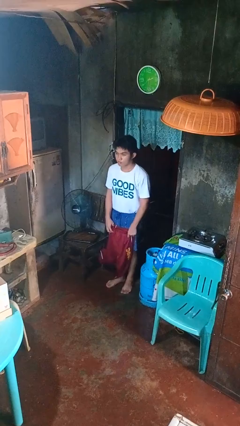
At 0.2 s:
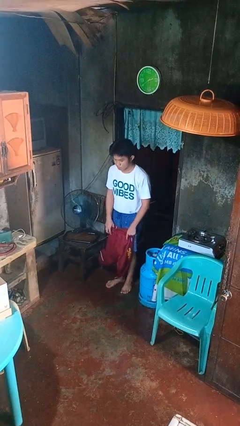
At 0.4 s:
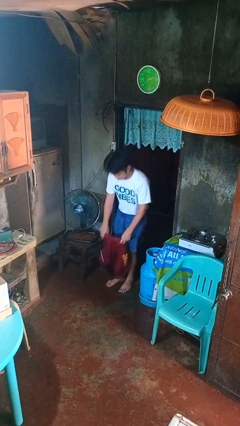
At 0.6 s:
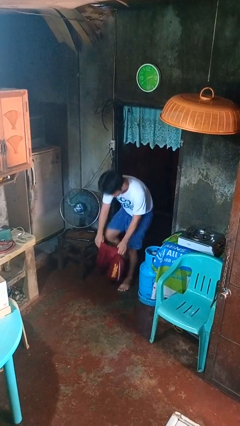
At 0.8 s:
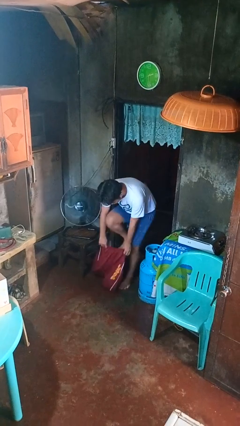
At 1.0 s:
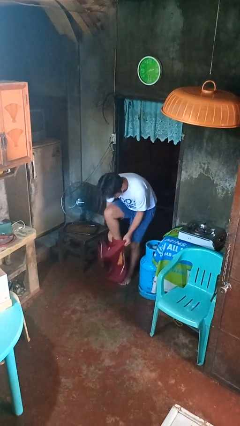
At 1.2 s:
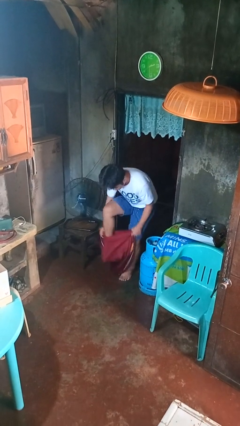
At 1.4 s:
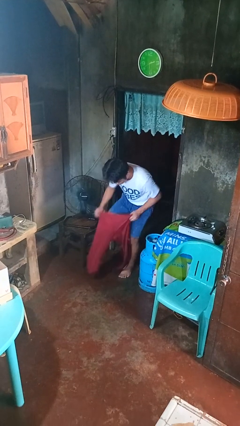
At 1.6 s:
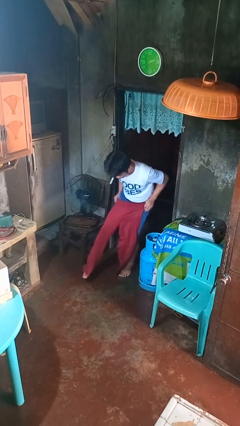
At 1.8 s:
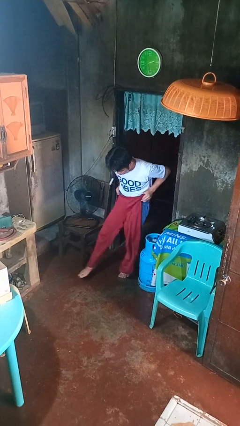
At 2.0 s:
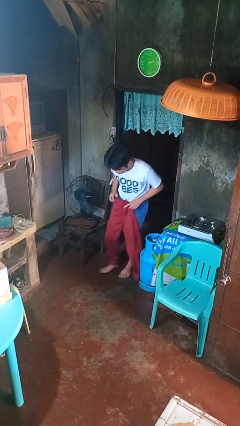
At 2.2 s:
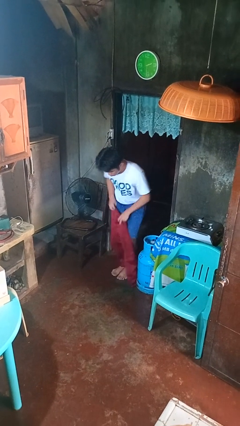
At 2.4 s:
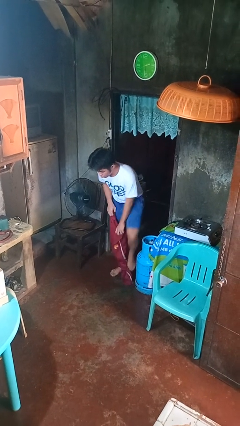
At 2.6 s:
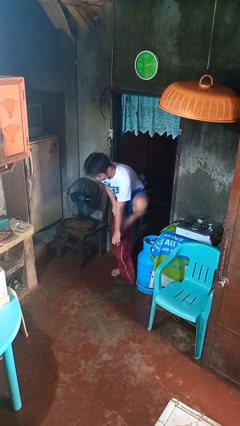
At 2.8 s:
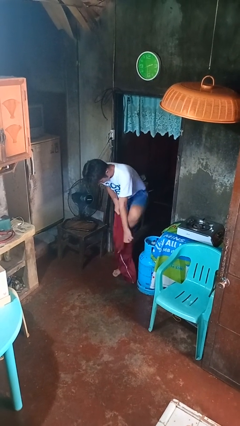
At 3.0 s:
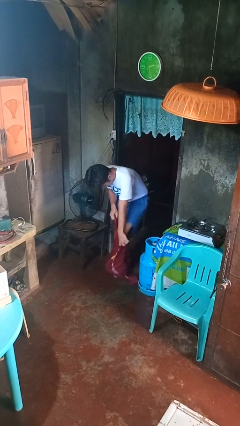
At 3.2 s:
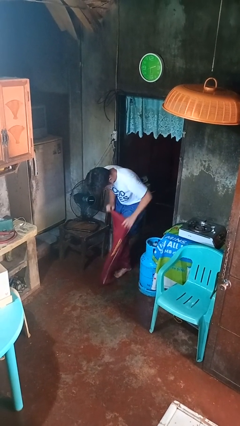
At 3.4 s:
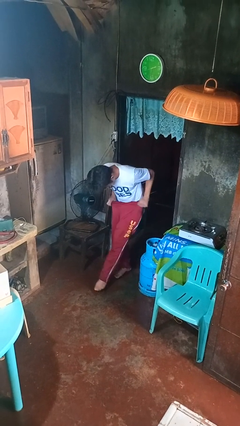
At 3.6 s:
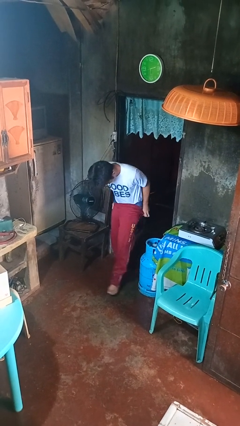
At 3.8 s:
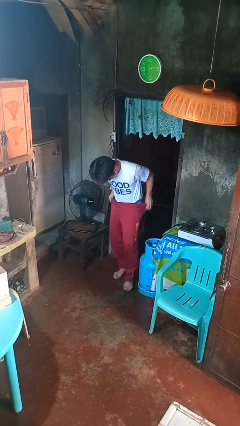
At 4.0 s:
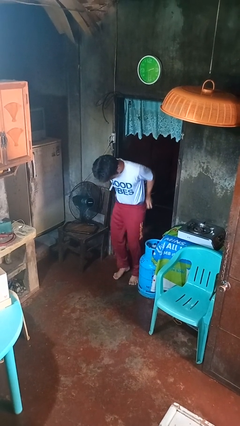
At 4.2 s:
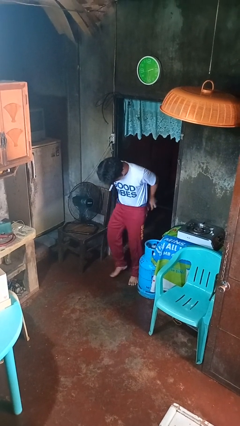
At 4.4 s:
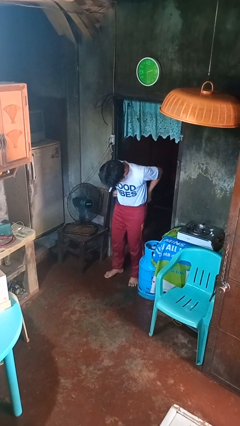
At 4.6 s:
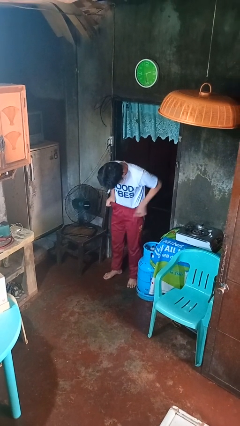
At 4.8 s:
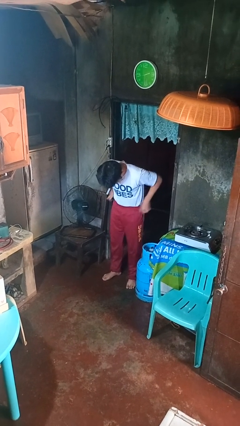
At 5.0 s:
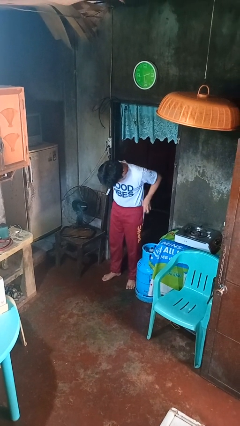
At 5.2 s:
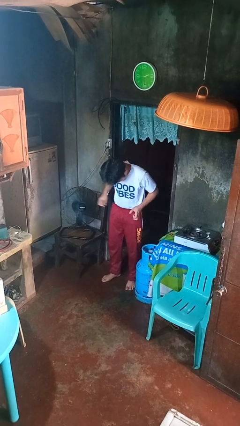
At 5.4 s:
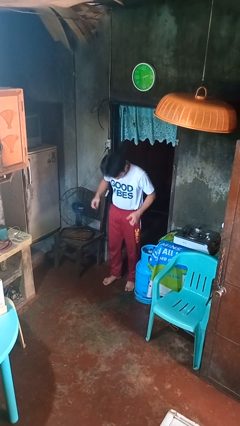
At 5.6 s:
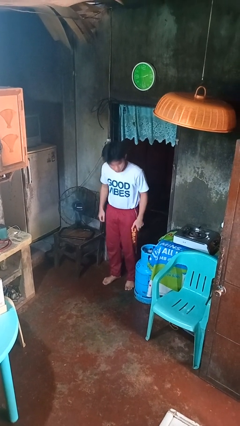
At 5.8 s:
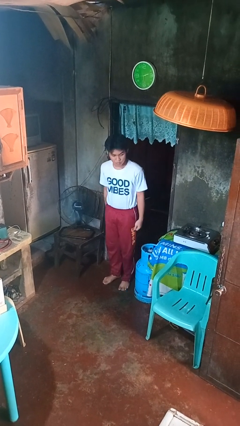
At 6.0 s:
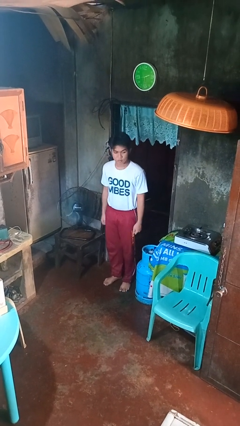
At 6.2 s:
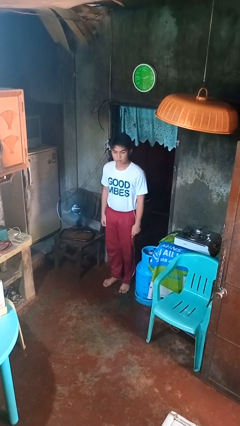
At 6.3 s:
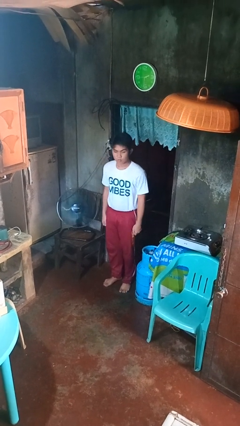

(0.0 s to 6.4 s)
person puts on pants

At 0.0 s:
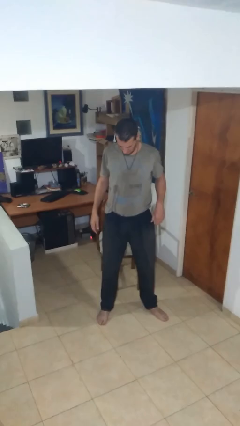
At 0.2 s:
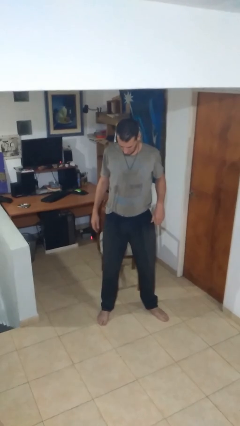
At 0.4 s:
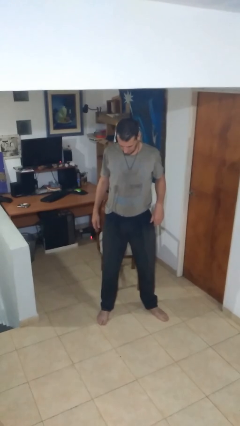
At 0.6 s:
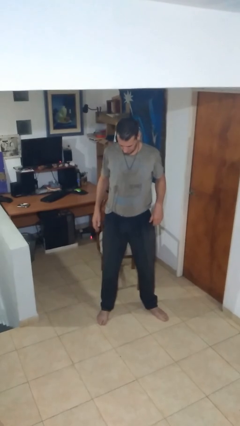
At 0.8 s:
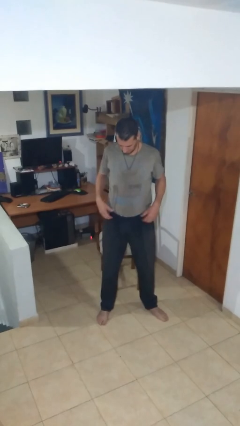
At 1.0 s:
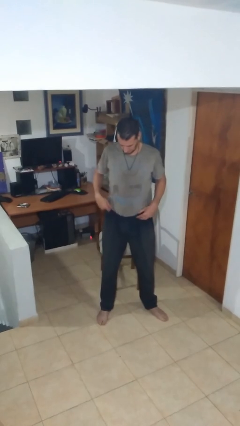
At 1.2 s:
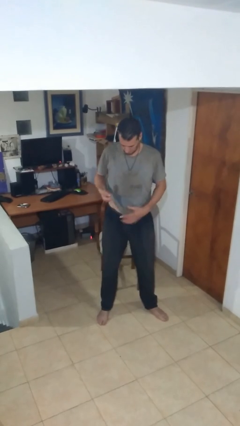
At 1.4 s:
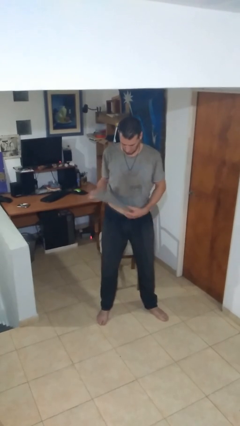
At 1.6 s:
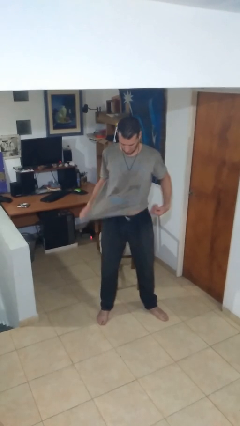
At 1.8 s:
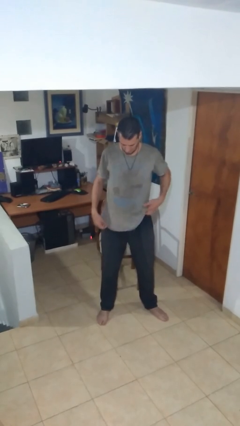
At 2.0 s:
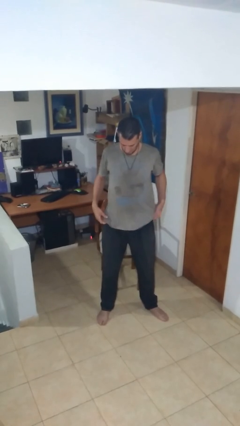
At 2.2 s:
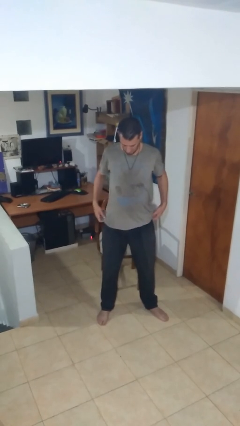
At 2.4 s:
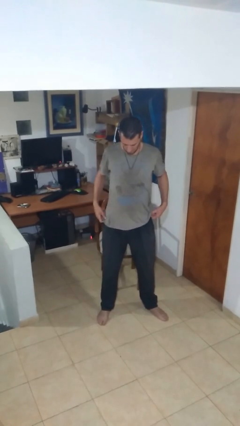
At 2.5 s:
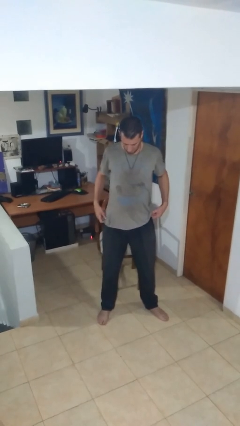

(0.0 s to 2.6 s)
person untucks shirt

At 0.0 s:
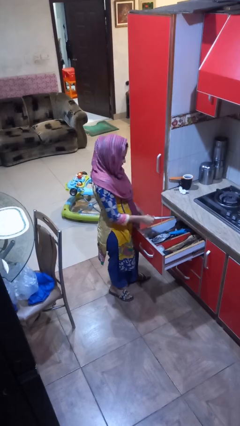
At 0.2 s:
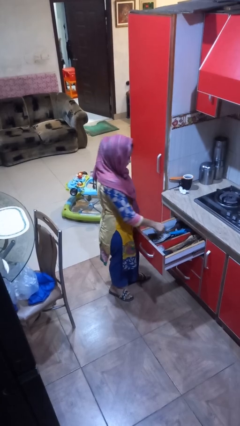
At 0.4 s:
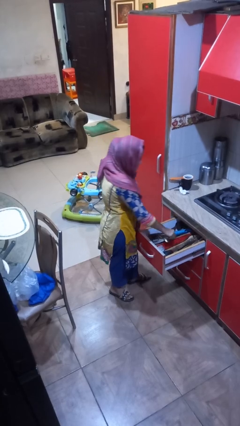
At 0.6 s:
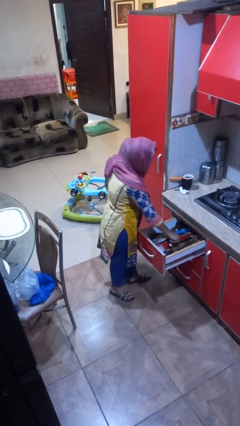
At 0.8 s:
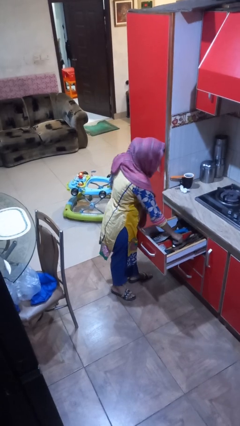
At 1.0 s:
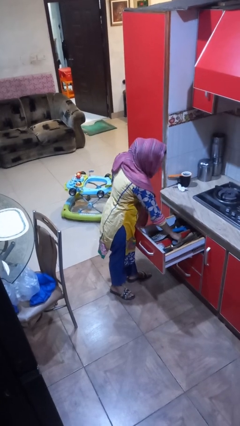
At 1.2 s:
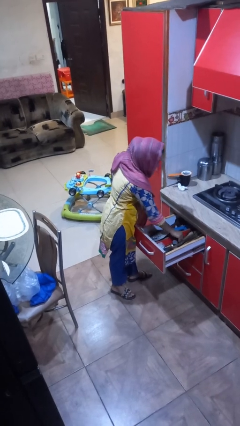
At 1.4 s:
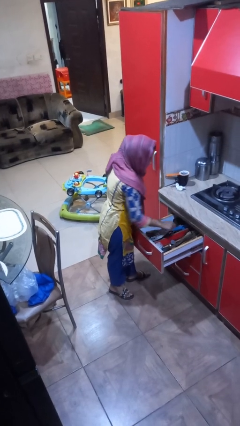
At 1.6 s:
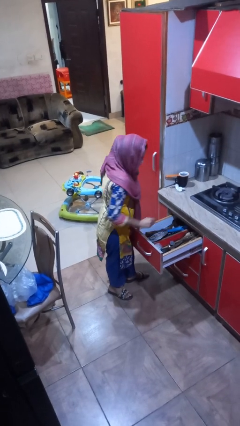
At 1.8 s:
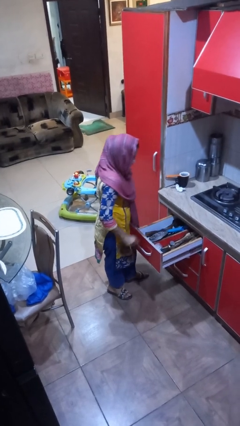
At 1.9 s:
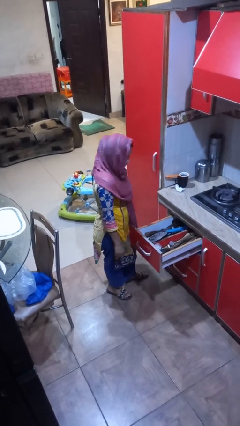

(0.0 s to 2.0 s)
person puts object into kitchen drawer

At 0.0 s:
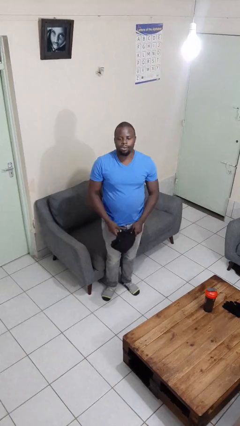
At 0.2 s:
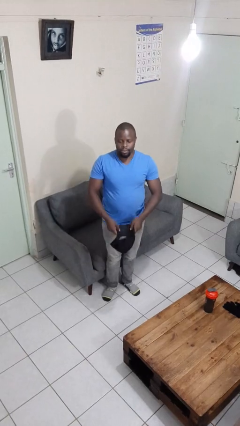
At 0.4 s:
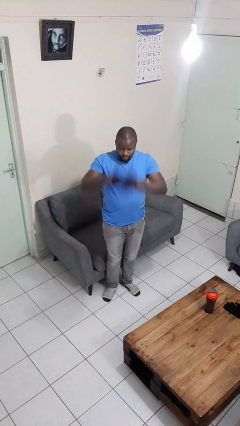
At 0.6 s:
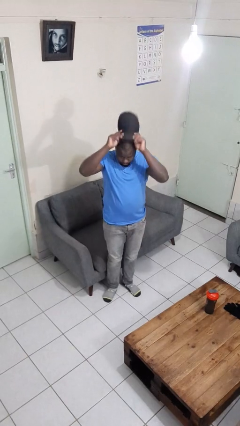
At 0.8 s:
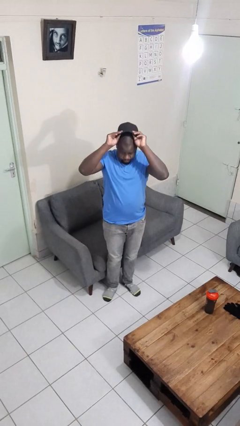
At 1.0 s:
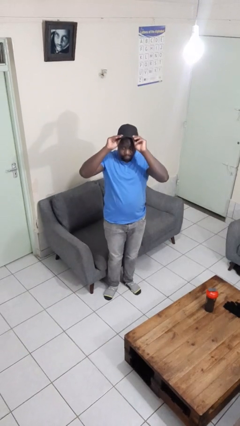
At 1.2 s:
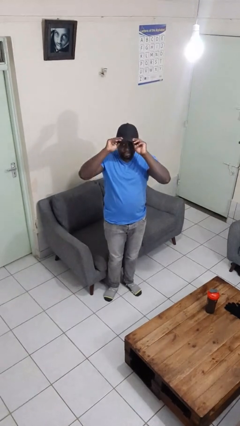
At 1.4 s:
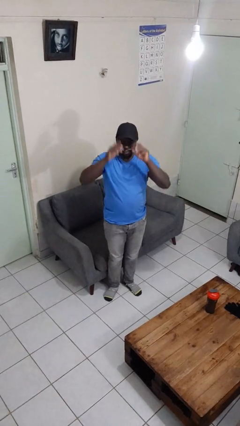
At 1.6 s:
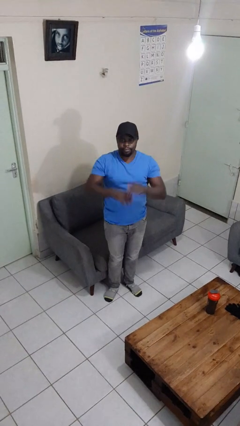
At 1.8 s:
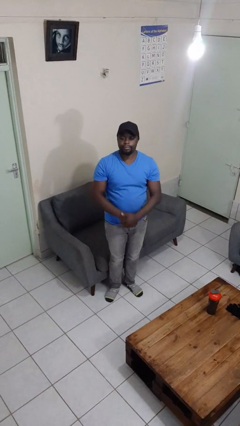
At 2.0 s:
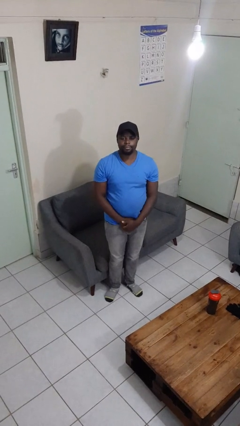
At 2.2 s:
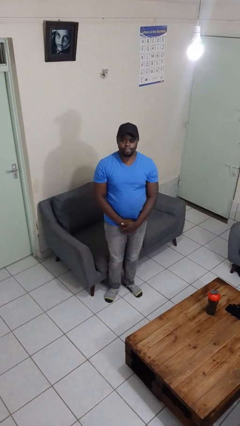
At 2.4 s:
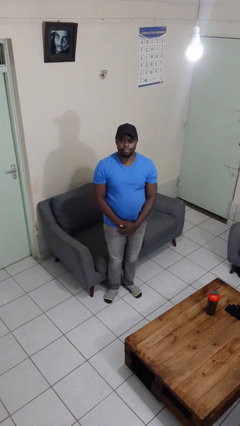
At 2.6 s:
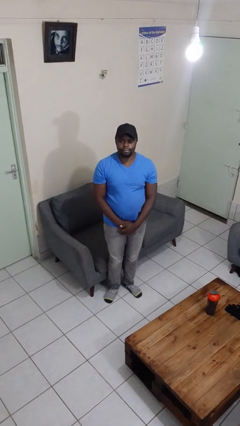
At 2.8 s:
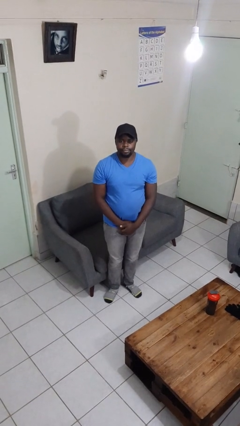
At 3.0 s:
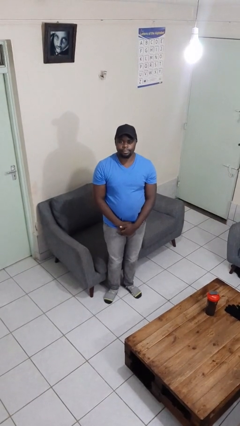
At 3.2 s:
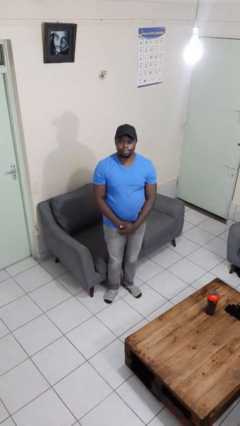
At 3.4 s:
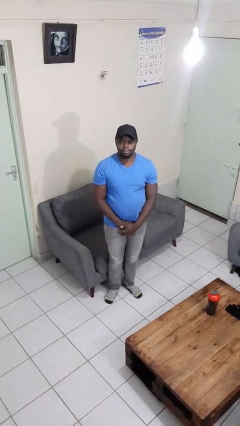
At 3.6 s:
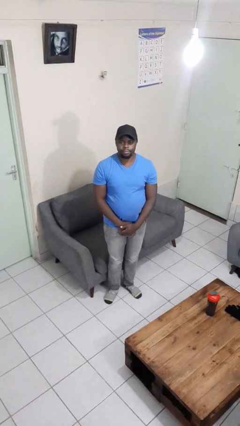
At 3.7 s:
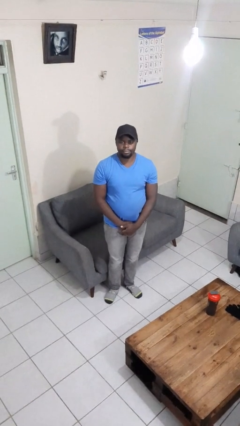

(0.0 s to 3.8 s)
person puts on hat

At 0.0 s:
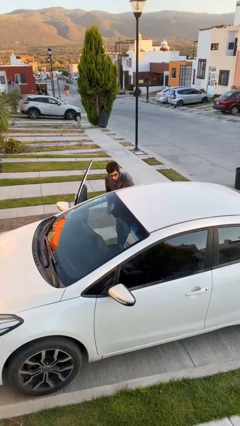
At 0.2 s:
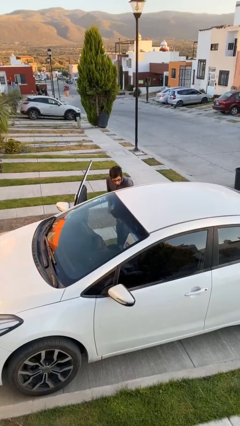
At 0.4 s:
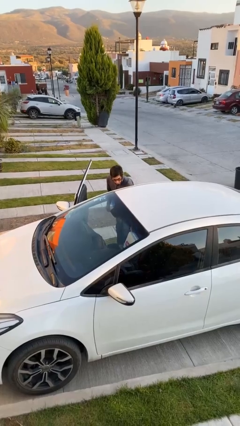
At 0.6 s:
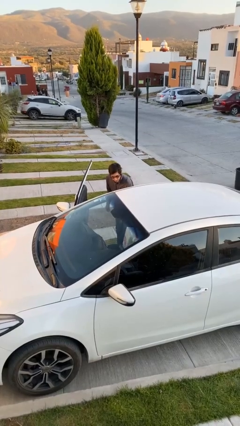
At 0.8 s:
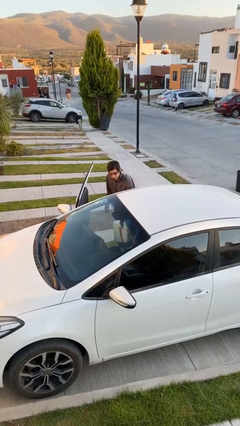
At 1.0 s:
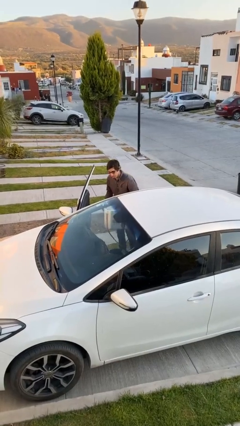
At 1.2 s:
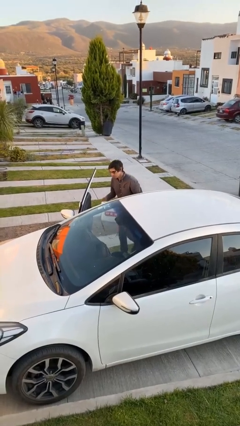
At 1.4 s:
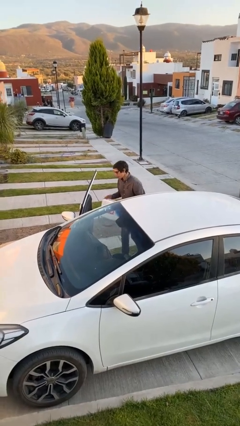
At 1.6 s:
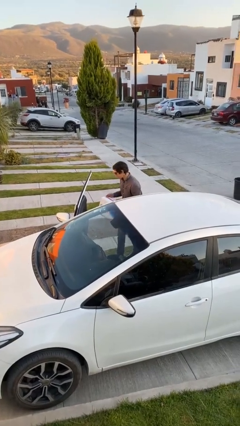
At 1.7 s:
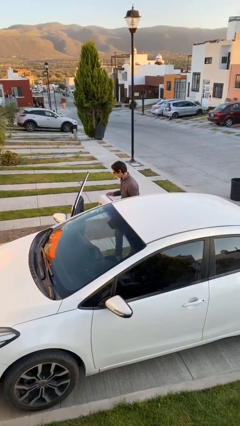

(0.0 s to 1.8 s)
person unloads car

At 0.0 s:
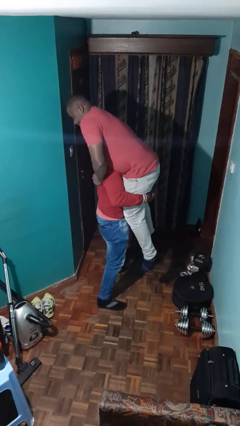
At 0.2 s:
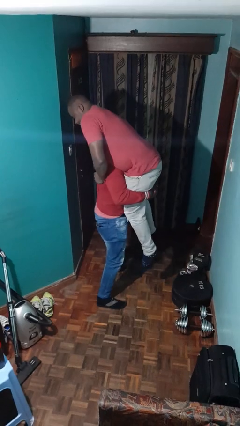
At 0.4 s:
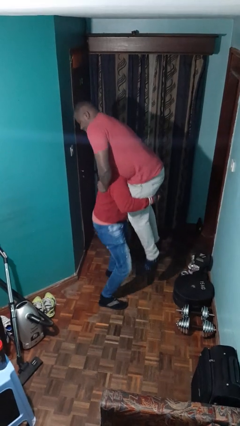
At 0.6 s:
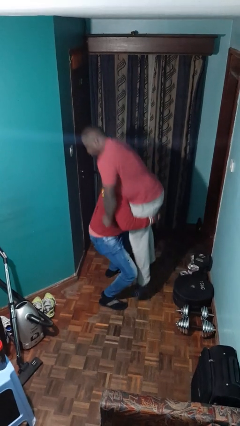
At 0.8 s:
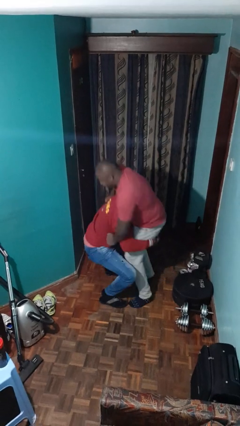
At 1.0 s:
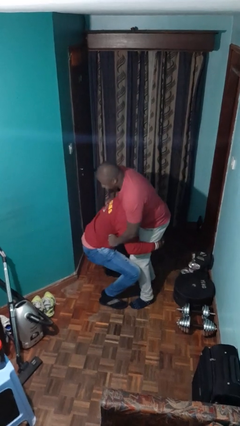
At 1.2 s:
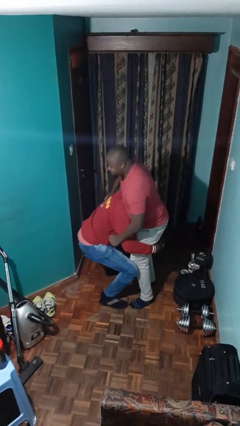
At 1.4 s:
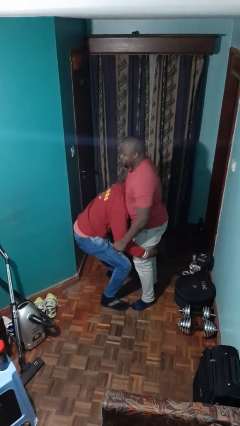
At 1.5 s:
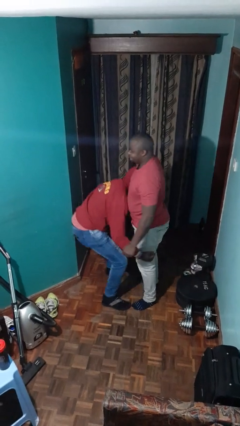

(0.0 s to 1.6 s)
person puts down person
